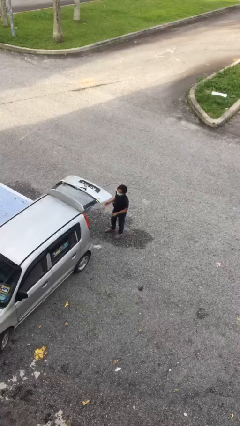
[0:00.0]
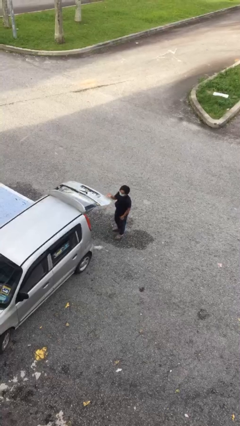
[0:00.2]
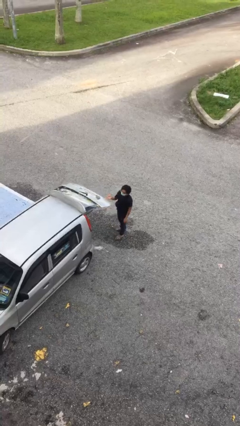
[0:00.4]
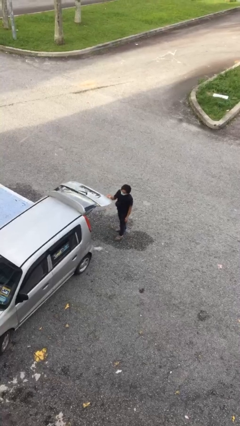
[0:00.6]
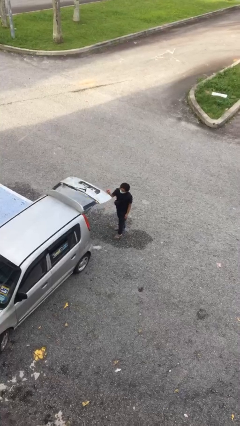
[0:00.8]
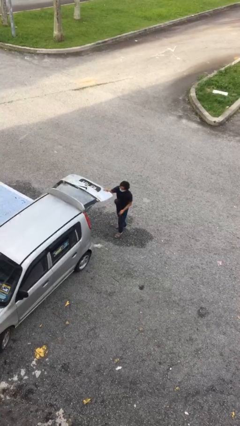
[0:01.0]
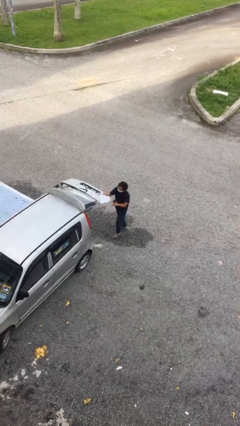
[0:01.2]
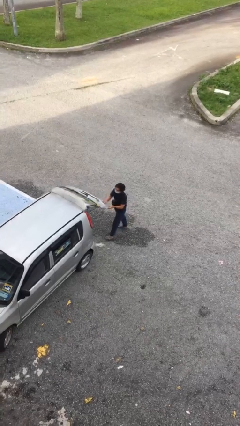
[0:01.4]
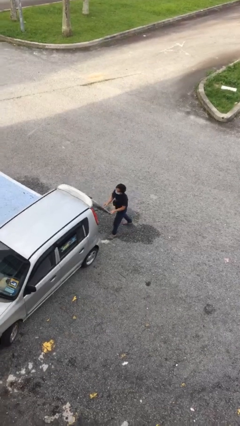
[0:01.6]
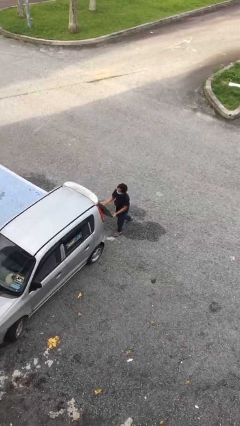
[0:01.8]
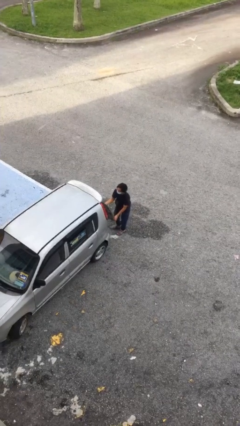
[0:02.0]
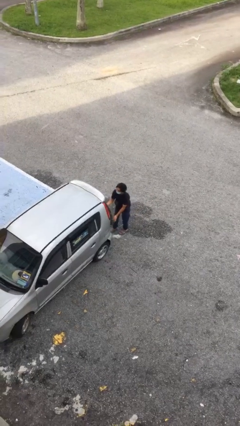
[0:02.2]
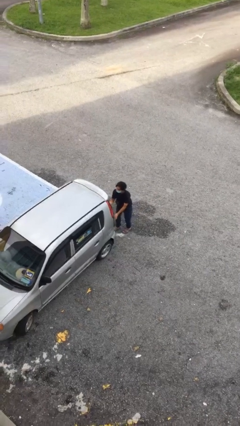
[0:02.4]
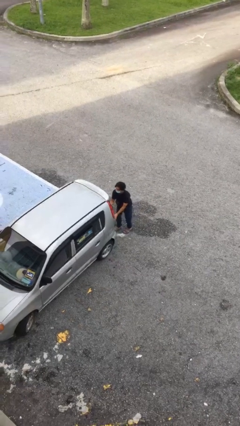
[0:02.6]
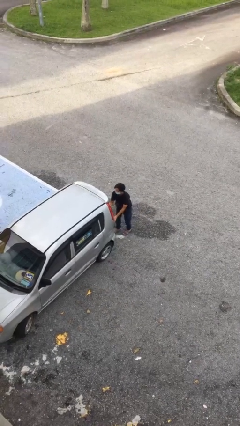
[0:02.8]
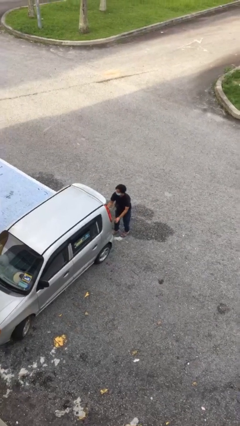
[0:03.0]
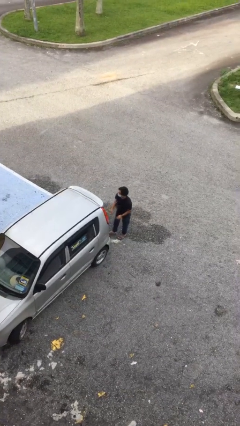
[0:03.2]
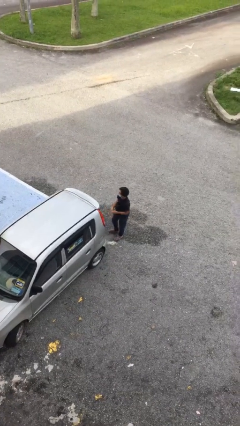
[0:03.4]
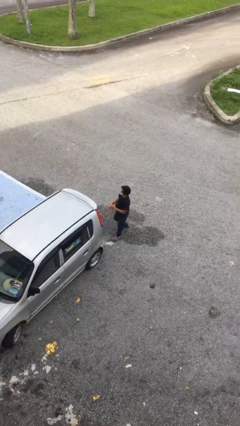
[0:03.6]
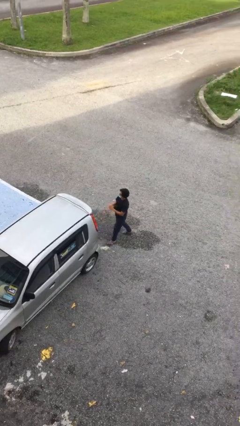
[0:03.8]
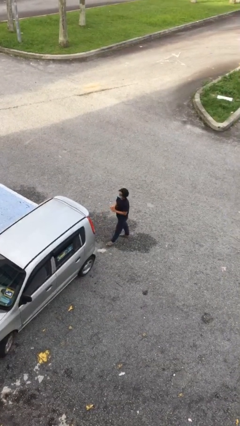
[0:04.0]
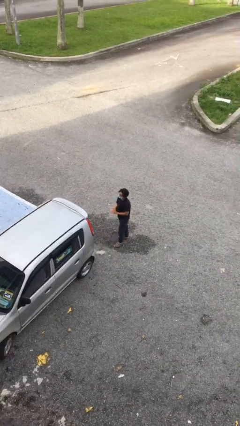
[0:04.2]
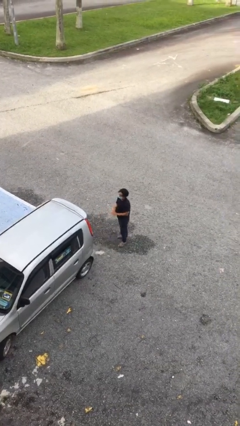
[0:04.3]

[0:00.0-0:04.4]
person closes car trunk

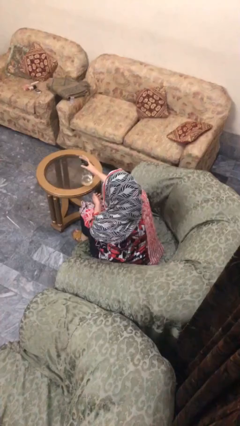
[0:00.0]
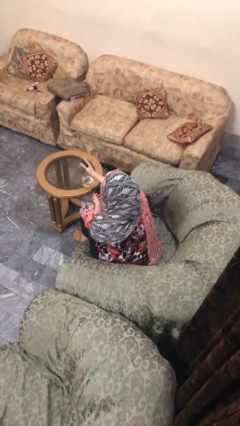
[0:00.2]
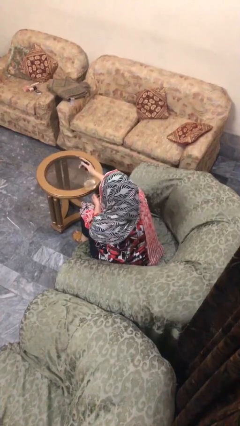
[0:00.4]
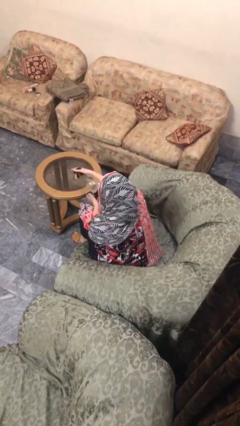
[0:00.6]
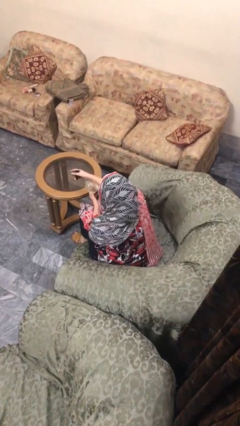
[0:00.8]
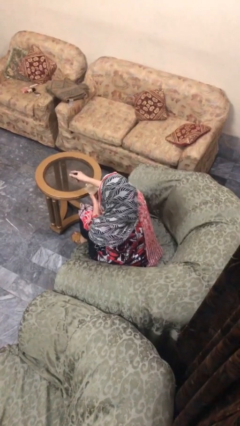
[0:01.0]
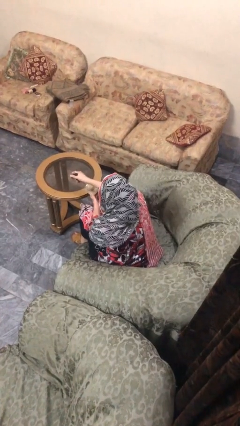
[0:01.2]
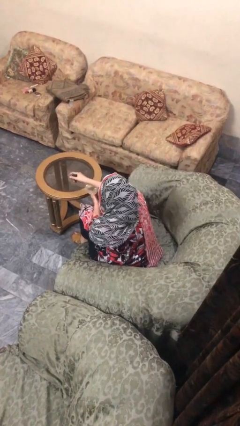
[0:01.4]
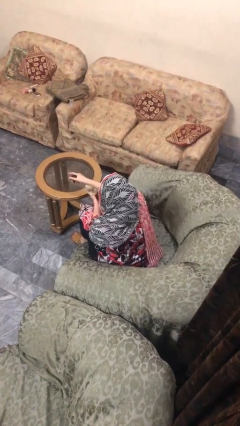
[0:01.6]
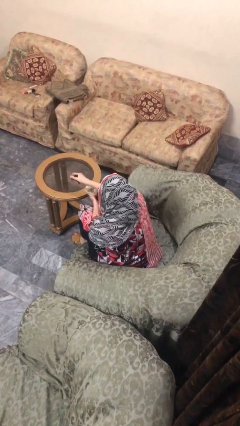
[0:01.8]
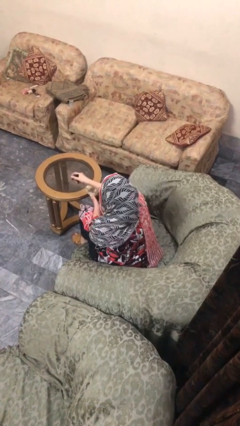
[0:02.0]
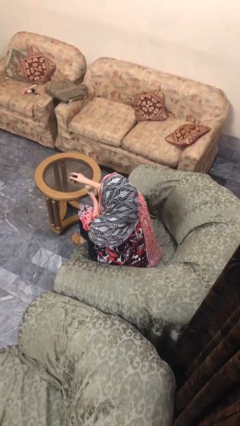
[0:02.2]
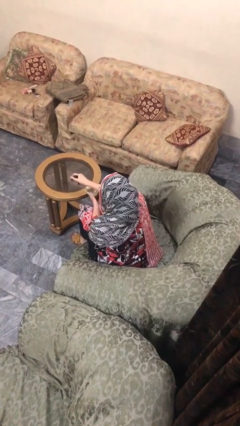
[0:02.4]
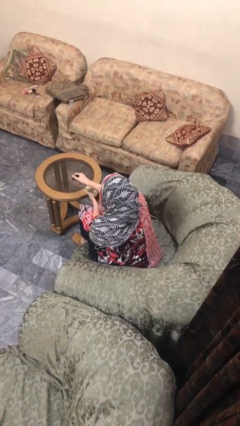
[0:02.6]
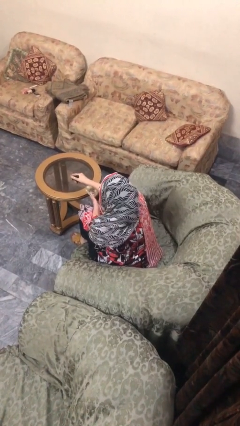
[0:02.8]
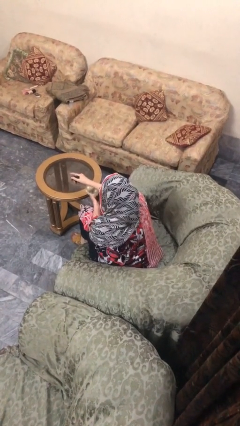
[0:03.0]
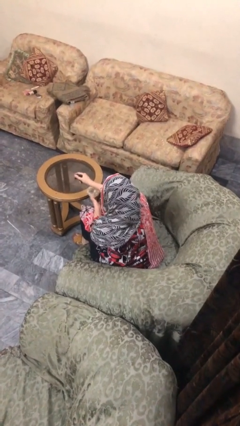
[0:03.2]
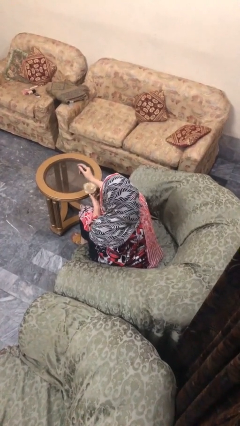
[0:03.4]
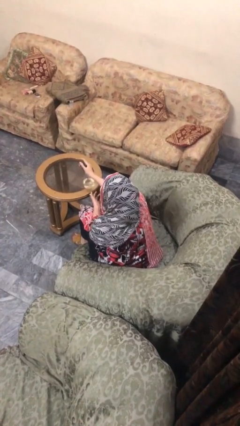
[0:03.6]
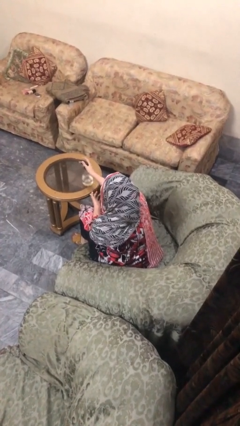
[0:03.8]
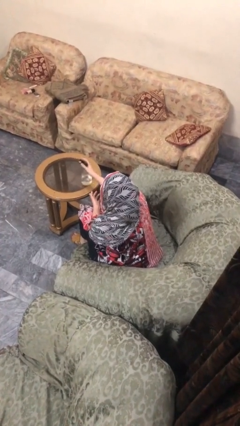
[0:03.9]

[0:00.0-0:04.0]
person sprays from bottle

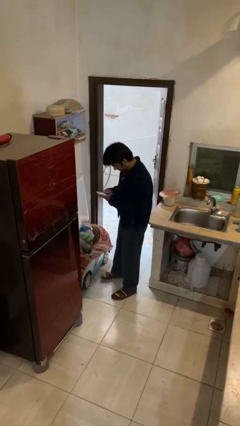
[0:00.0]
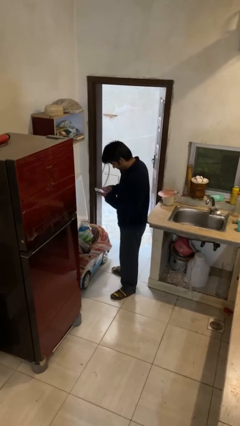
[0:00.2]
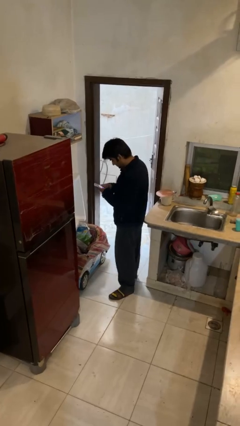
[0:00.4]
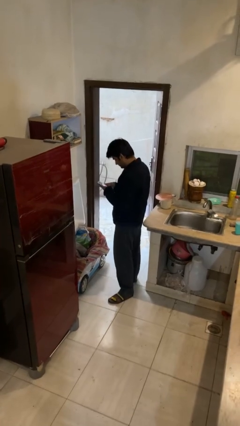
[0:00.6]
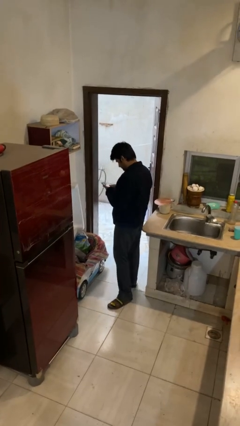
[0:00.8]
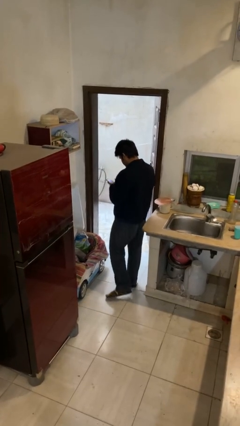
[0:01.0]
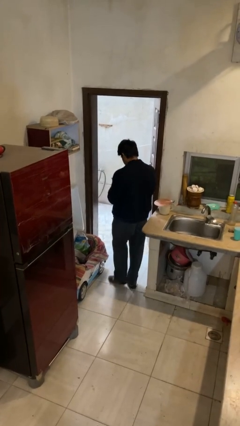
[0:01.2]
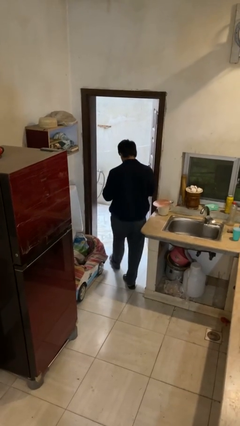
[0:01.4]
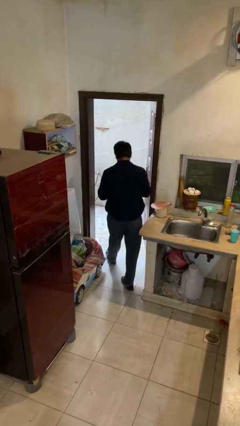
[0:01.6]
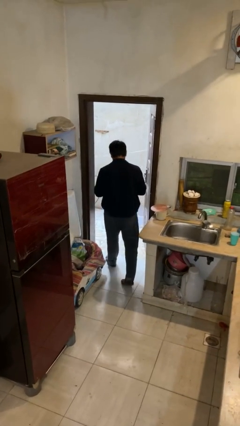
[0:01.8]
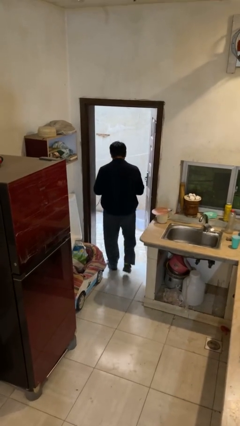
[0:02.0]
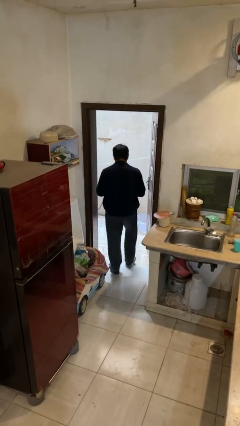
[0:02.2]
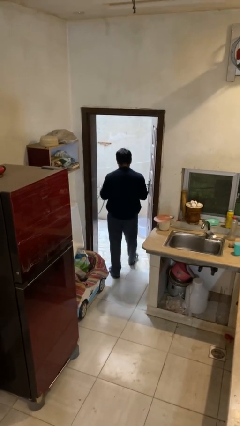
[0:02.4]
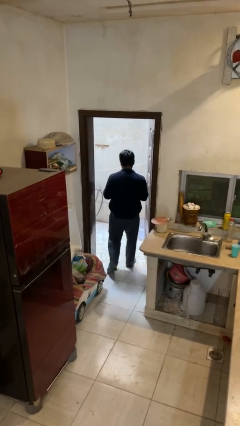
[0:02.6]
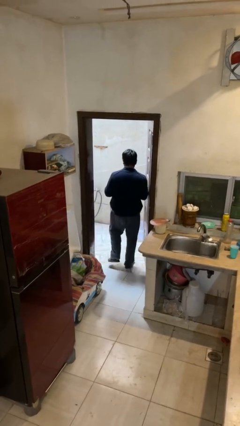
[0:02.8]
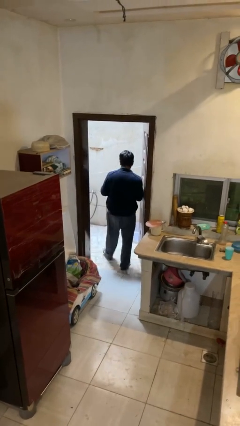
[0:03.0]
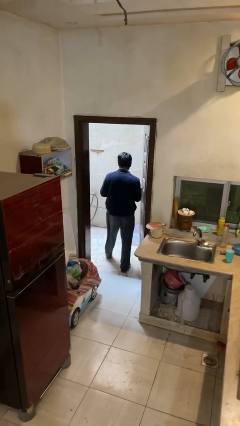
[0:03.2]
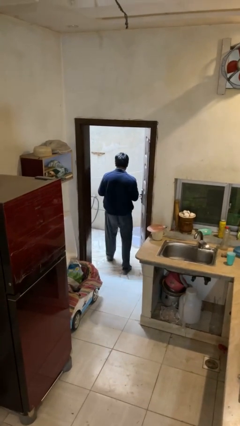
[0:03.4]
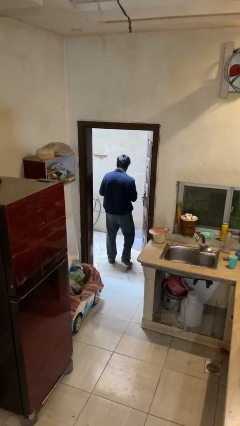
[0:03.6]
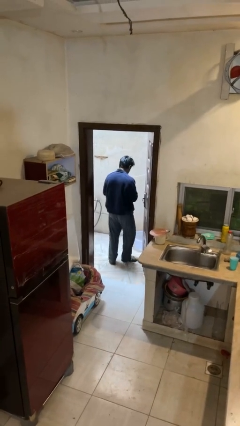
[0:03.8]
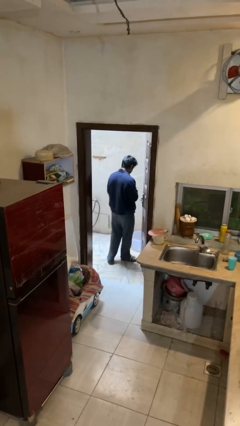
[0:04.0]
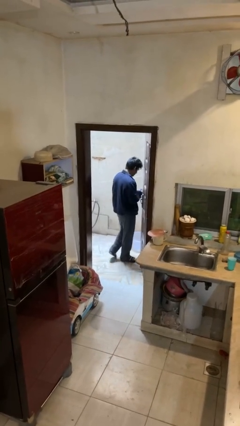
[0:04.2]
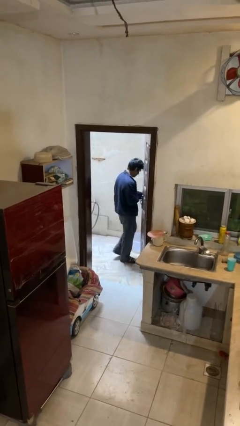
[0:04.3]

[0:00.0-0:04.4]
person exits scene through structure

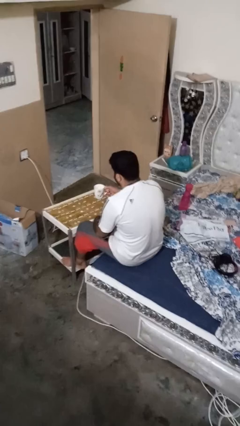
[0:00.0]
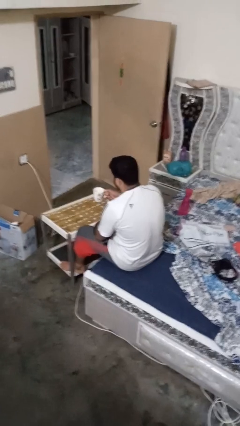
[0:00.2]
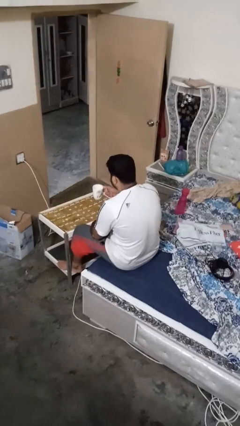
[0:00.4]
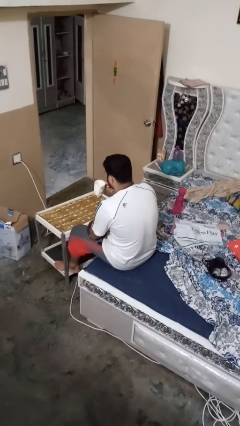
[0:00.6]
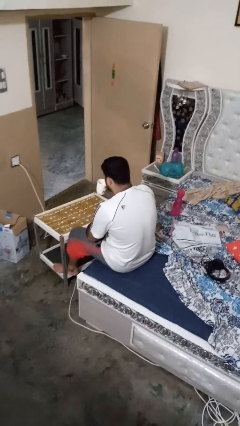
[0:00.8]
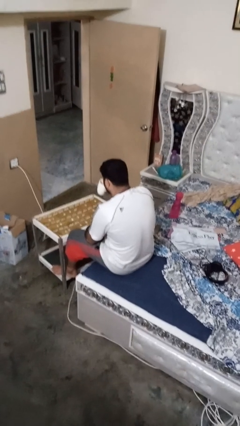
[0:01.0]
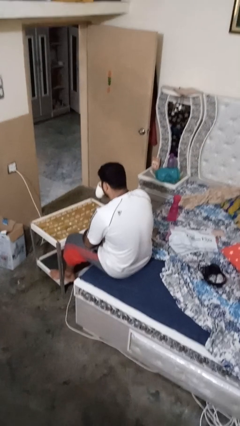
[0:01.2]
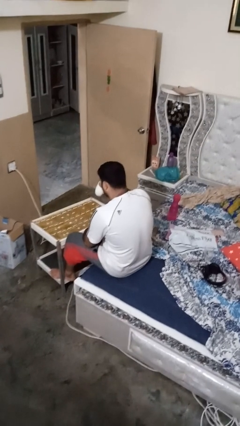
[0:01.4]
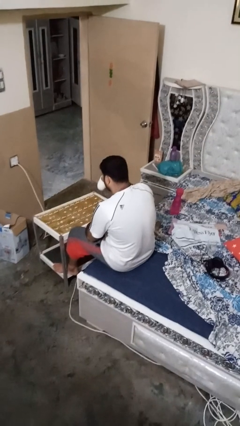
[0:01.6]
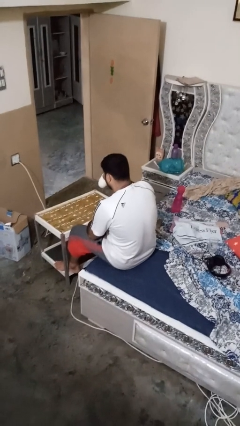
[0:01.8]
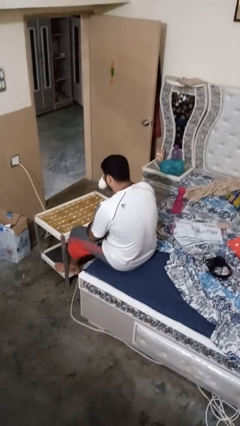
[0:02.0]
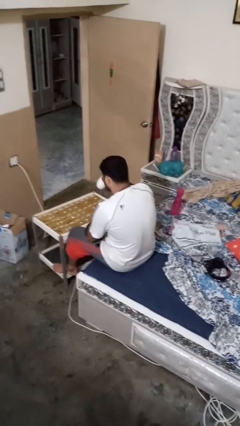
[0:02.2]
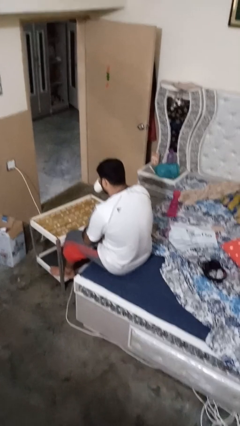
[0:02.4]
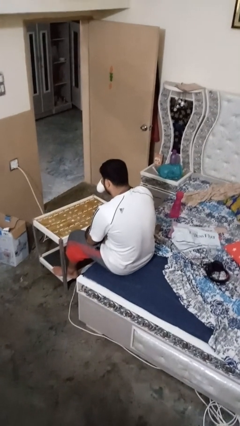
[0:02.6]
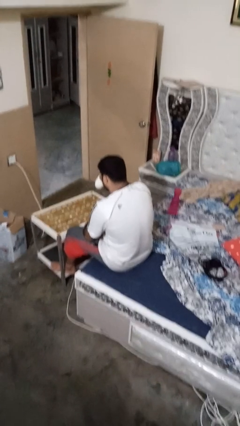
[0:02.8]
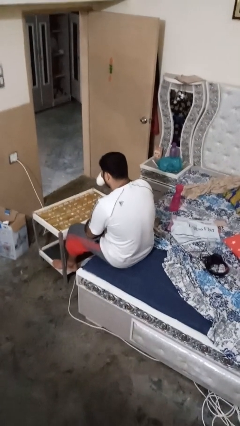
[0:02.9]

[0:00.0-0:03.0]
person drinks from mug

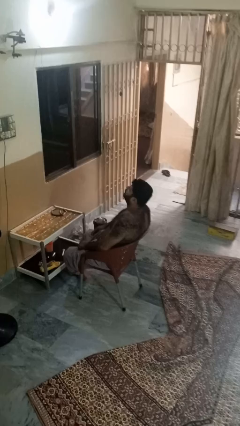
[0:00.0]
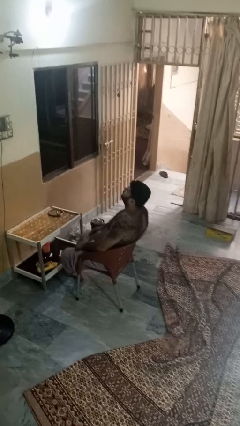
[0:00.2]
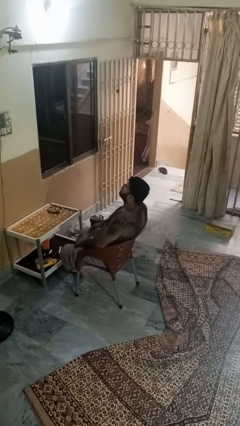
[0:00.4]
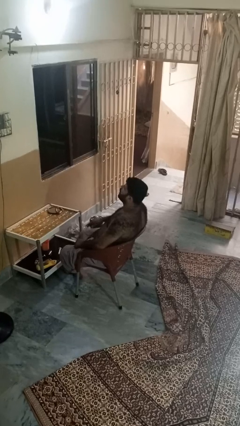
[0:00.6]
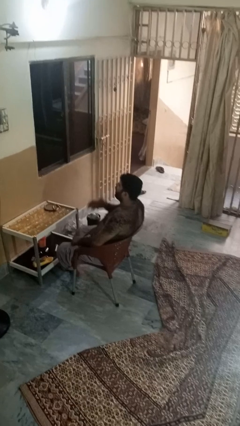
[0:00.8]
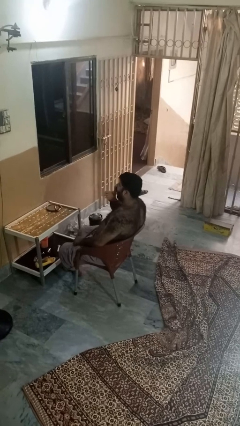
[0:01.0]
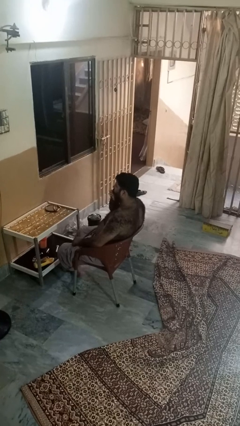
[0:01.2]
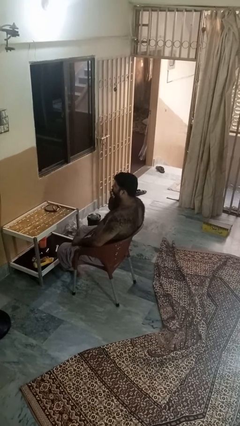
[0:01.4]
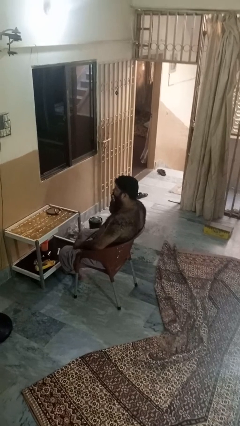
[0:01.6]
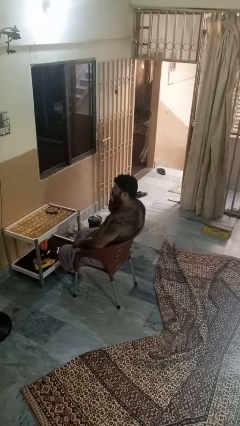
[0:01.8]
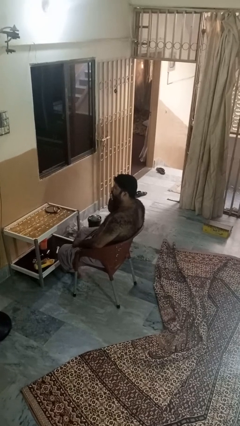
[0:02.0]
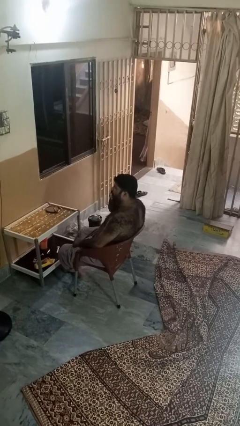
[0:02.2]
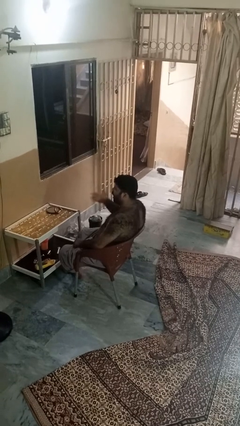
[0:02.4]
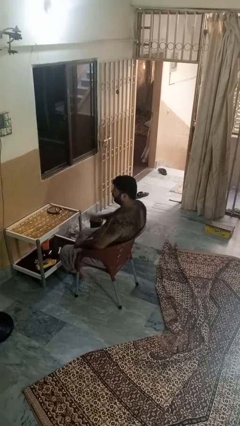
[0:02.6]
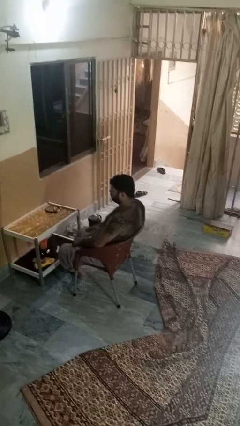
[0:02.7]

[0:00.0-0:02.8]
person yawns
